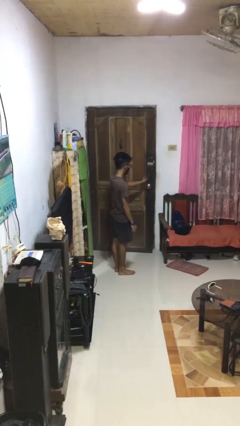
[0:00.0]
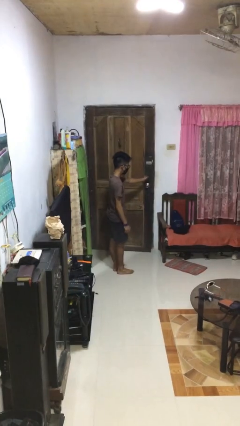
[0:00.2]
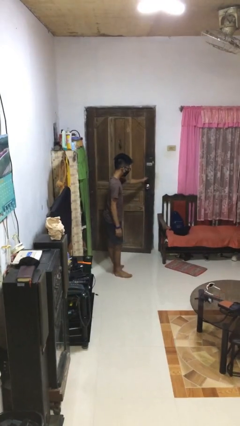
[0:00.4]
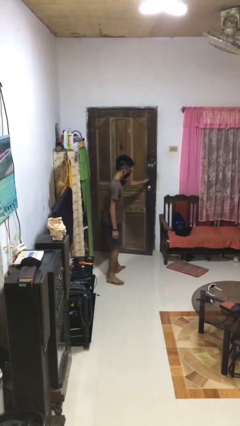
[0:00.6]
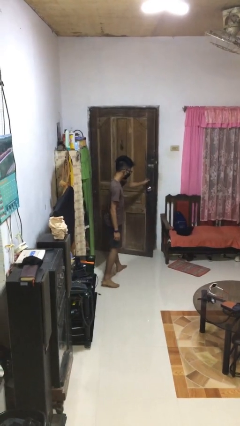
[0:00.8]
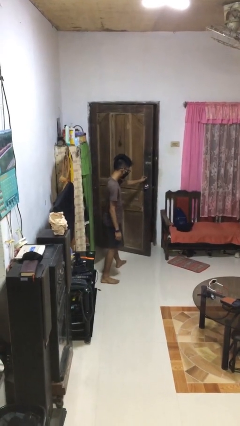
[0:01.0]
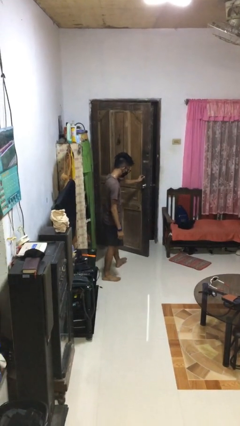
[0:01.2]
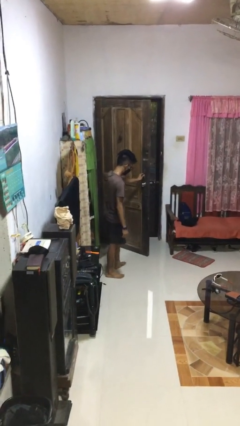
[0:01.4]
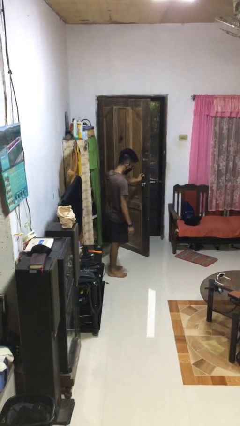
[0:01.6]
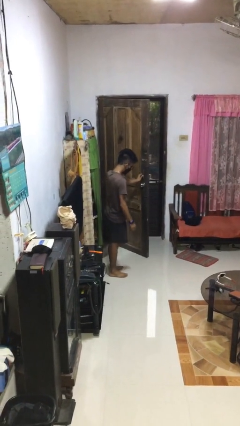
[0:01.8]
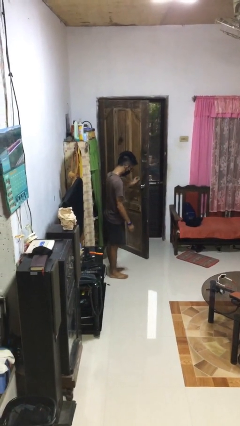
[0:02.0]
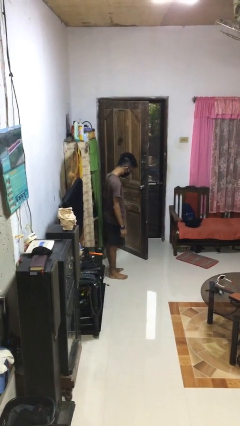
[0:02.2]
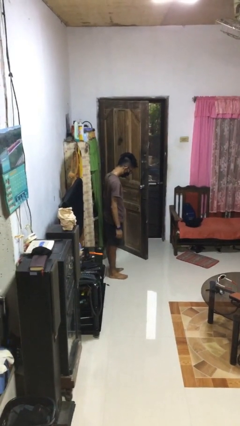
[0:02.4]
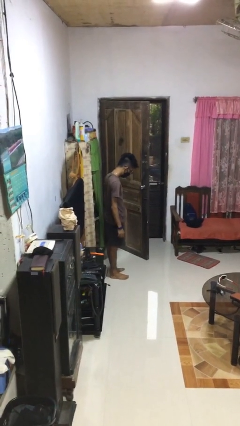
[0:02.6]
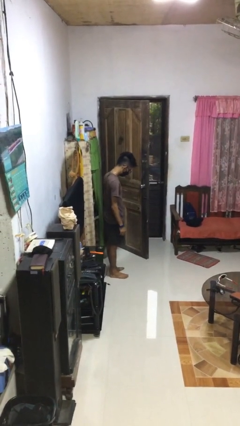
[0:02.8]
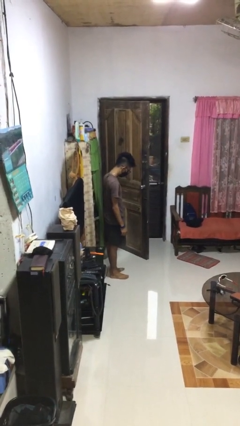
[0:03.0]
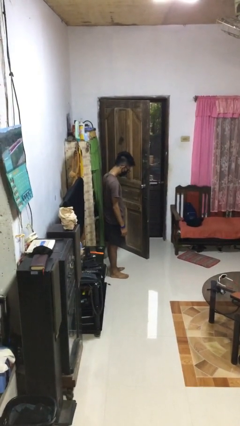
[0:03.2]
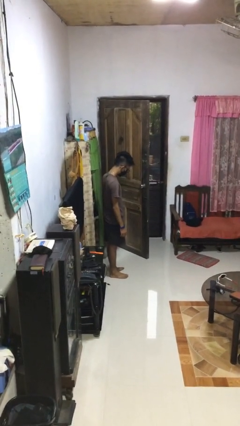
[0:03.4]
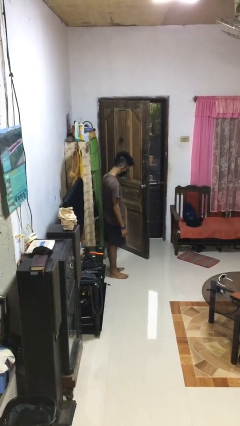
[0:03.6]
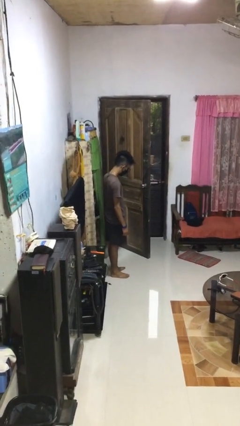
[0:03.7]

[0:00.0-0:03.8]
person opens facility door

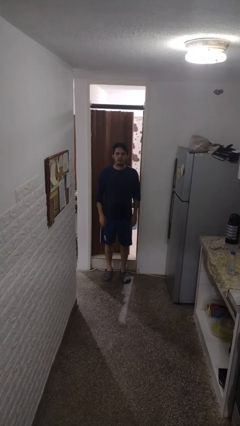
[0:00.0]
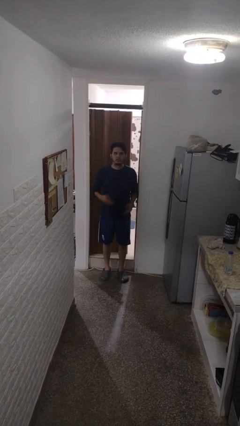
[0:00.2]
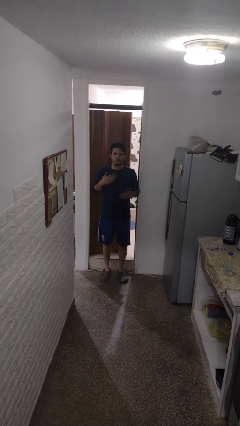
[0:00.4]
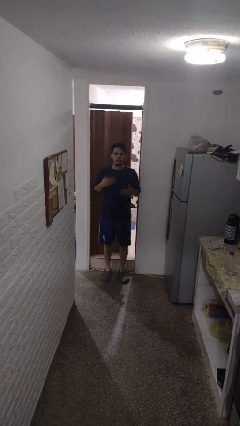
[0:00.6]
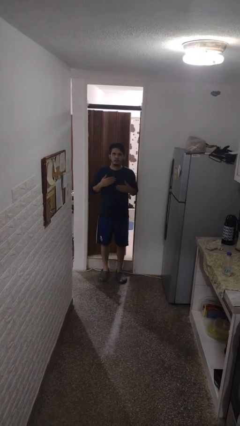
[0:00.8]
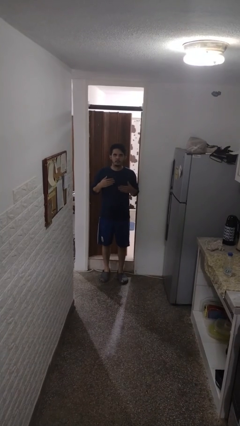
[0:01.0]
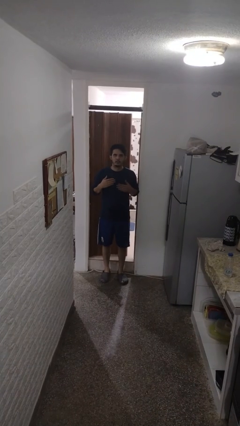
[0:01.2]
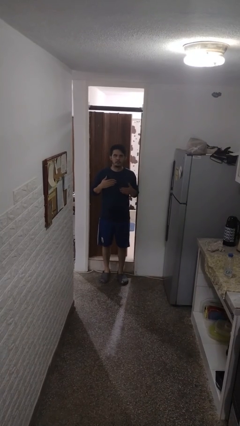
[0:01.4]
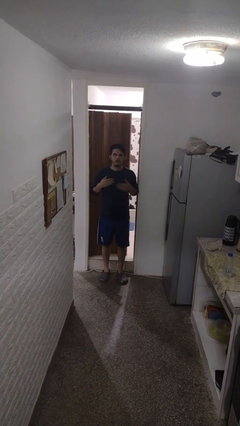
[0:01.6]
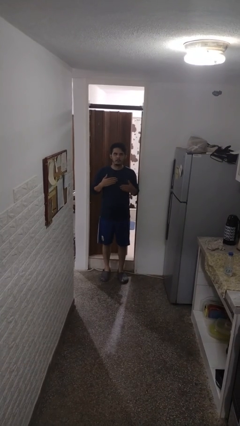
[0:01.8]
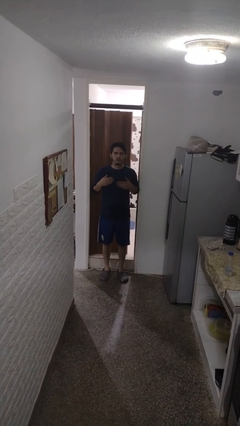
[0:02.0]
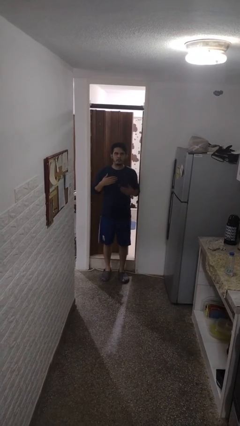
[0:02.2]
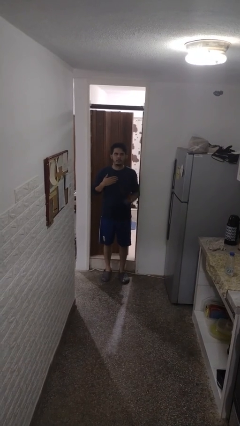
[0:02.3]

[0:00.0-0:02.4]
person drums on chest

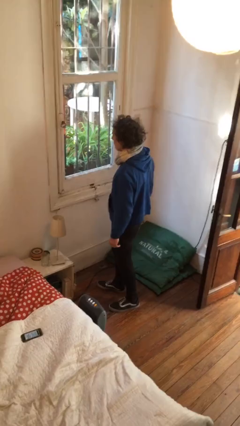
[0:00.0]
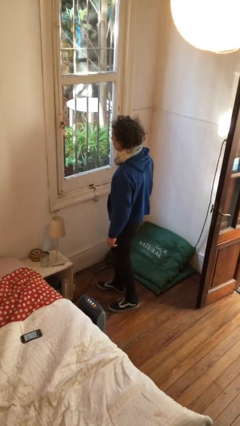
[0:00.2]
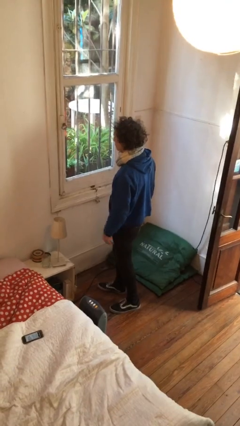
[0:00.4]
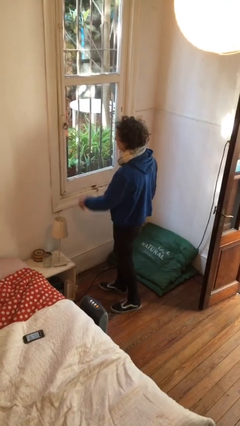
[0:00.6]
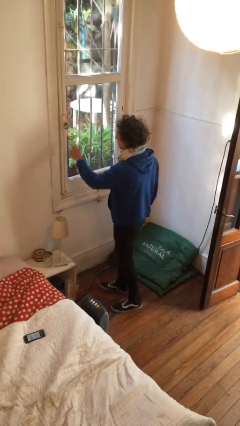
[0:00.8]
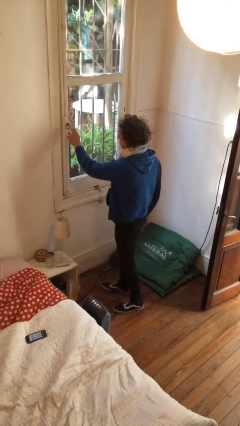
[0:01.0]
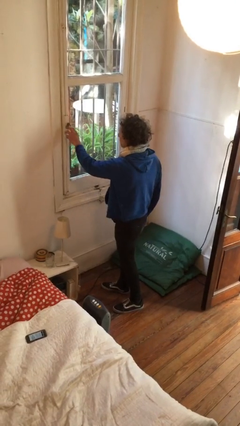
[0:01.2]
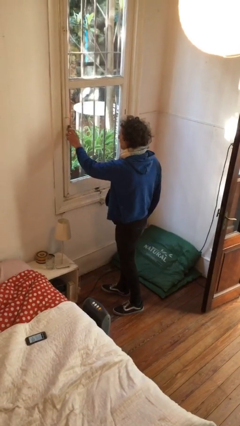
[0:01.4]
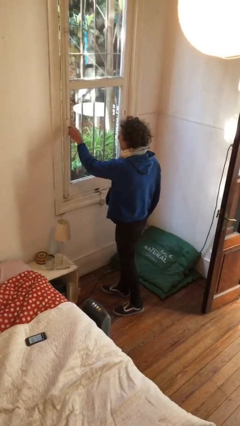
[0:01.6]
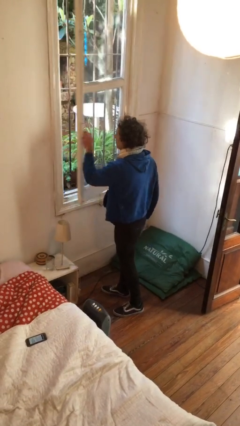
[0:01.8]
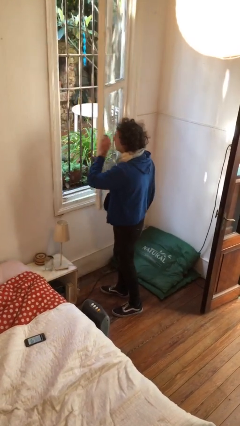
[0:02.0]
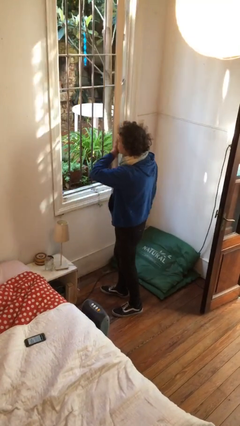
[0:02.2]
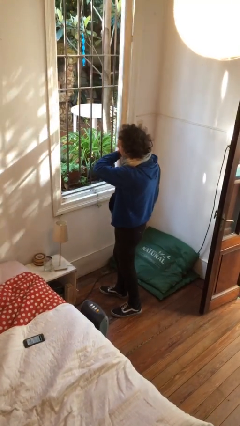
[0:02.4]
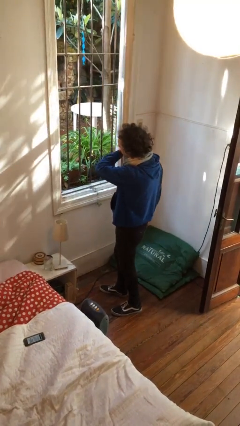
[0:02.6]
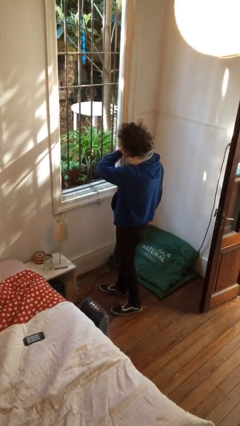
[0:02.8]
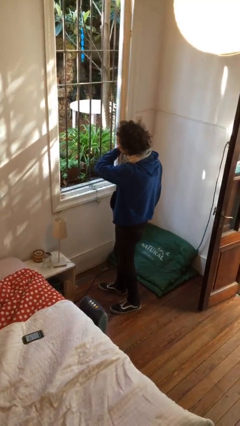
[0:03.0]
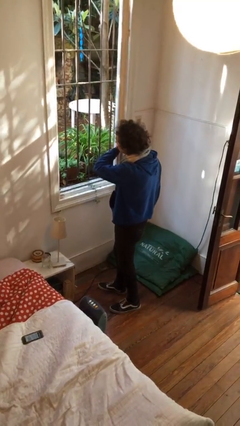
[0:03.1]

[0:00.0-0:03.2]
person opens home window

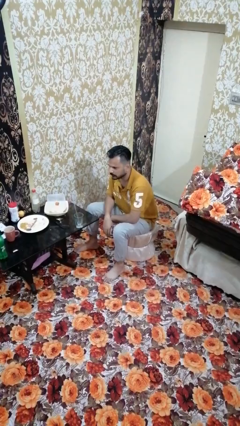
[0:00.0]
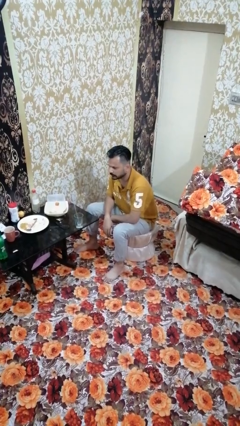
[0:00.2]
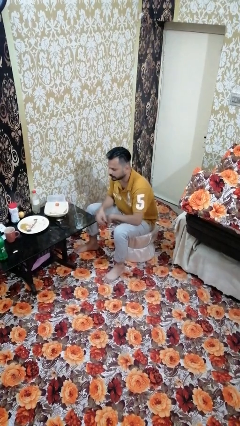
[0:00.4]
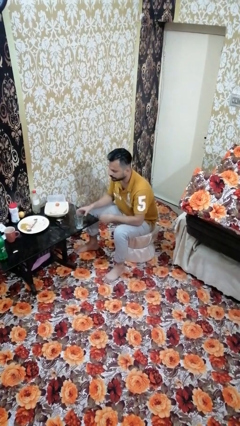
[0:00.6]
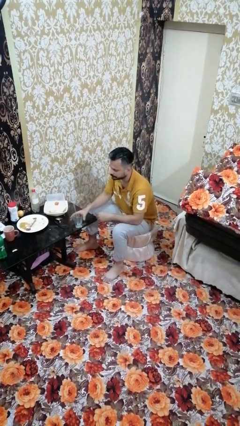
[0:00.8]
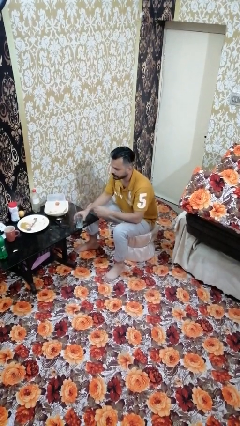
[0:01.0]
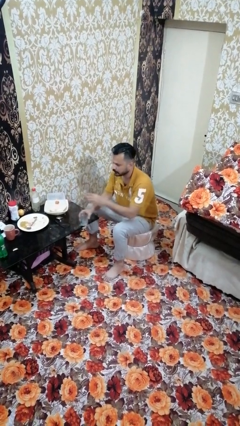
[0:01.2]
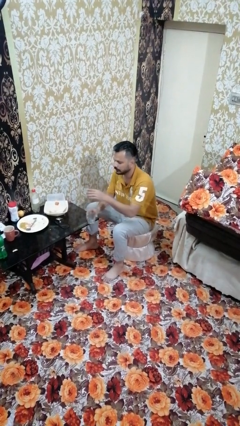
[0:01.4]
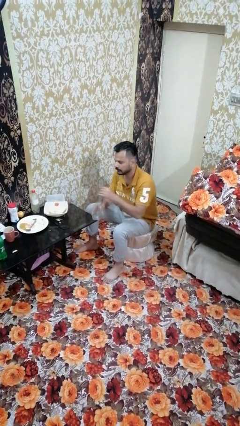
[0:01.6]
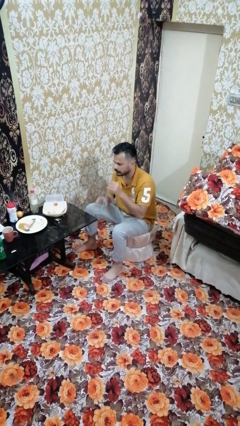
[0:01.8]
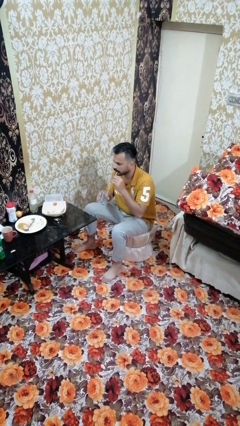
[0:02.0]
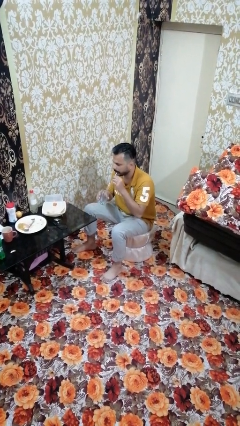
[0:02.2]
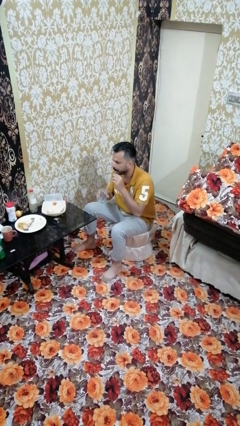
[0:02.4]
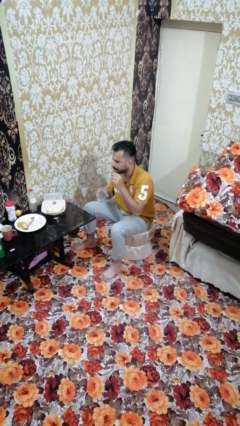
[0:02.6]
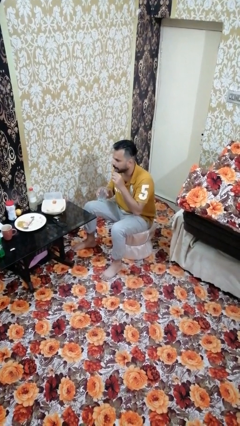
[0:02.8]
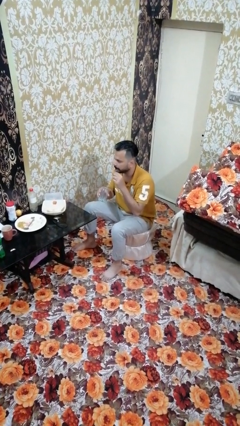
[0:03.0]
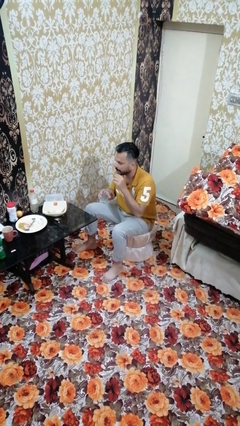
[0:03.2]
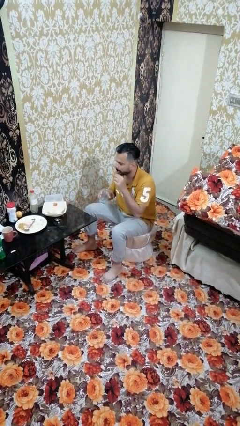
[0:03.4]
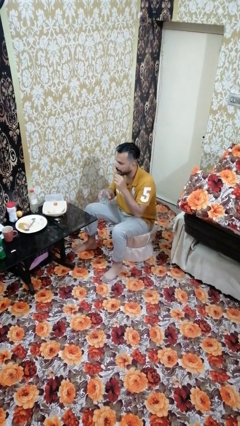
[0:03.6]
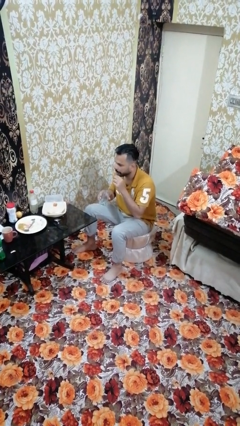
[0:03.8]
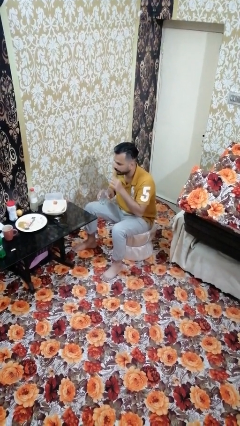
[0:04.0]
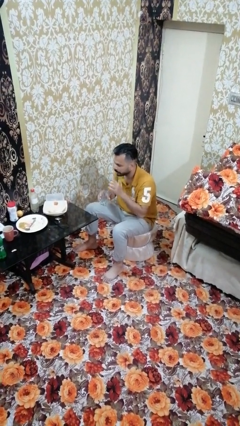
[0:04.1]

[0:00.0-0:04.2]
person drinks from straw

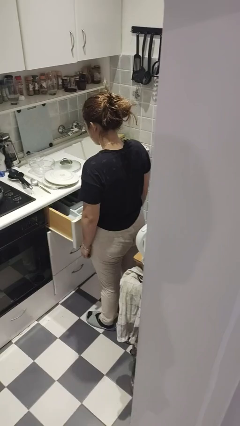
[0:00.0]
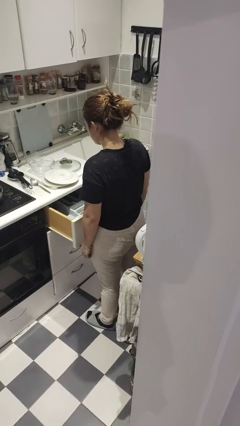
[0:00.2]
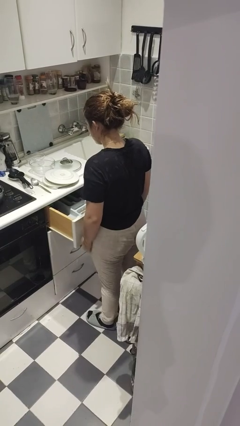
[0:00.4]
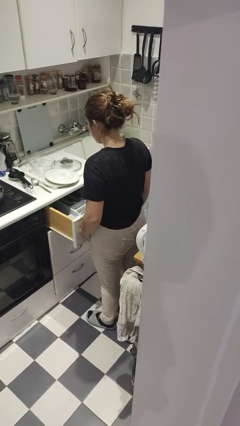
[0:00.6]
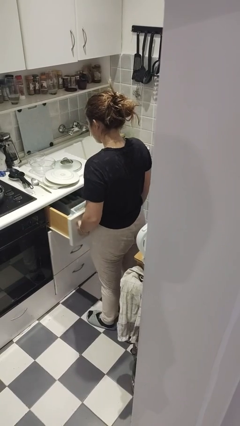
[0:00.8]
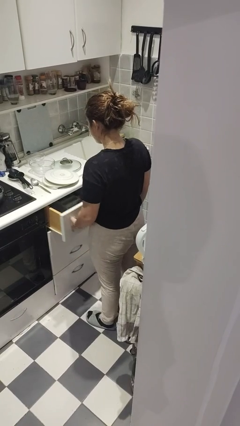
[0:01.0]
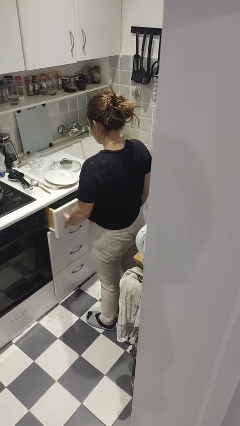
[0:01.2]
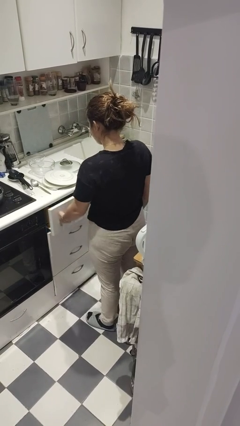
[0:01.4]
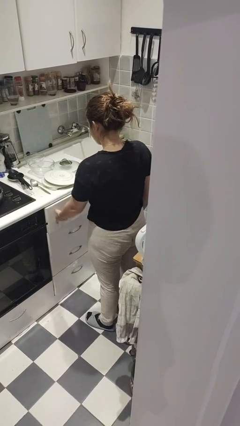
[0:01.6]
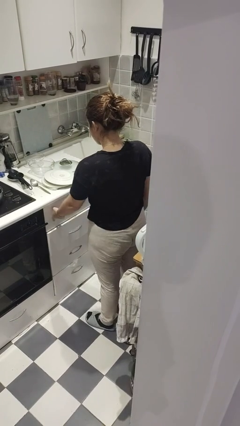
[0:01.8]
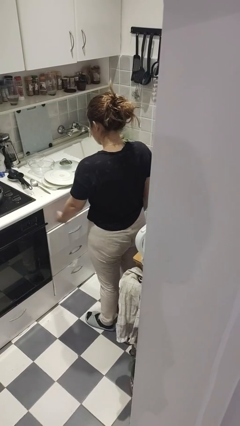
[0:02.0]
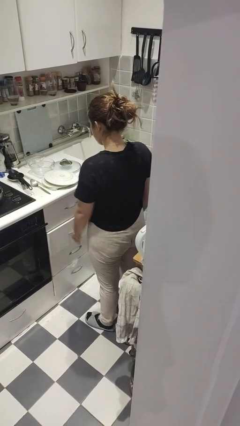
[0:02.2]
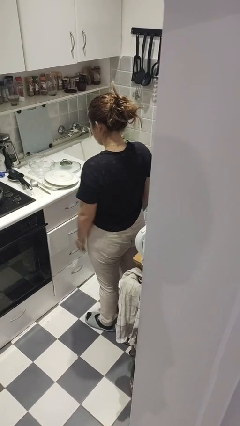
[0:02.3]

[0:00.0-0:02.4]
person closes kitchen drawer

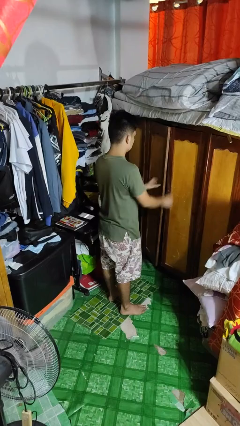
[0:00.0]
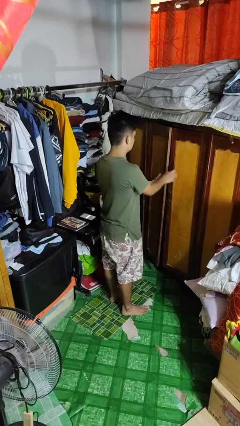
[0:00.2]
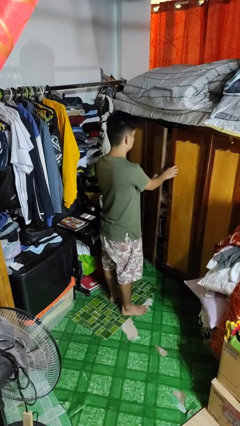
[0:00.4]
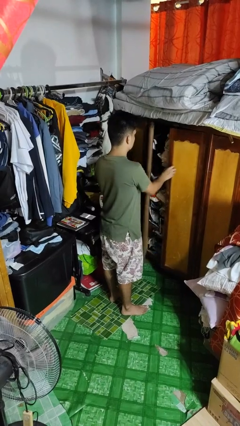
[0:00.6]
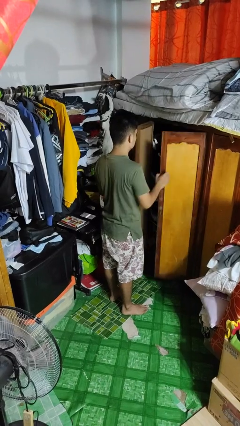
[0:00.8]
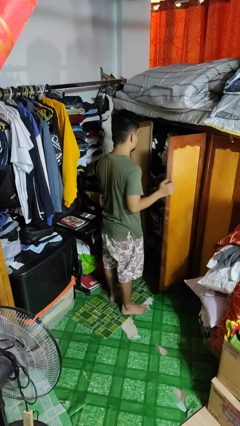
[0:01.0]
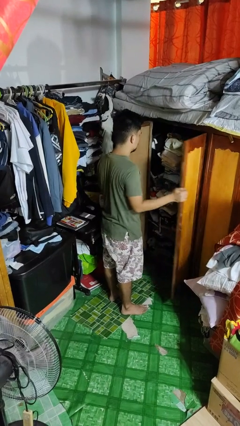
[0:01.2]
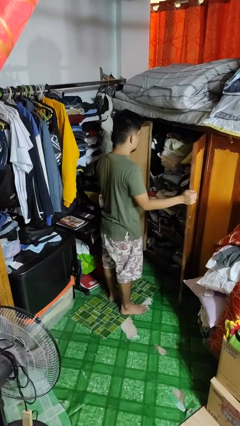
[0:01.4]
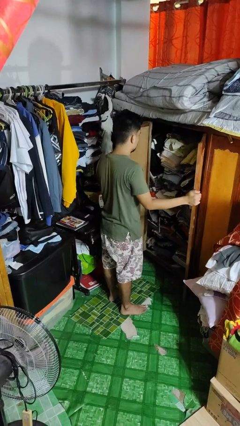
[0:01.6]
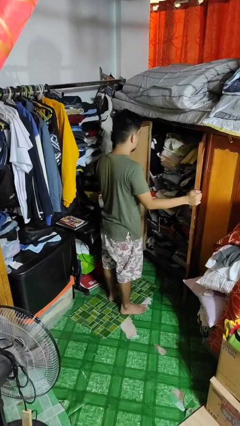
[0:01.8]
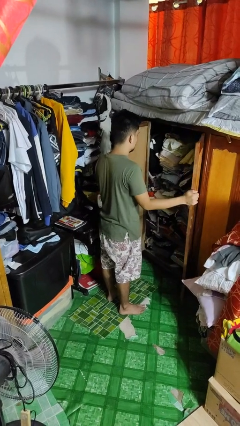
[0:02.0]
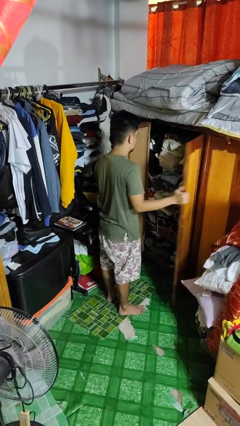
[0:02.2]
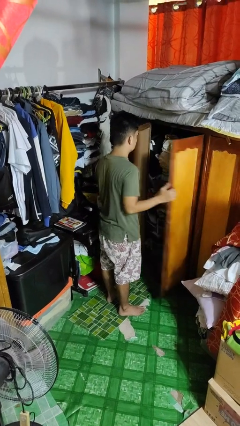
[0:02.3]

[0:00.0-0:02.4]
person opens closet door
